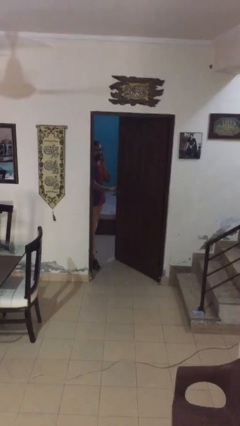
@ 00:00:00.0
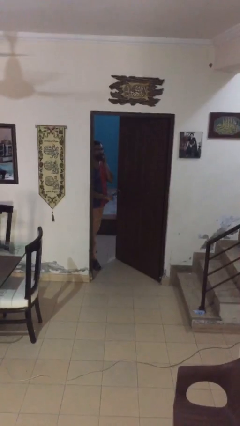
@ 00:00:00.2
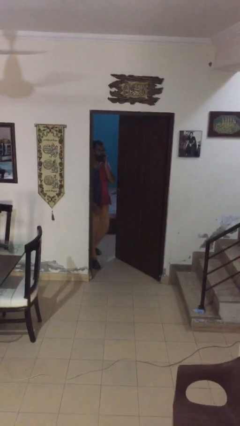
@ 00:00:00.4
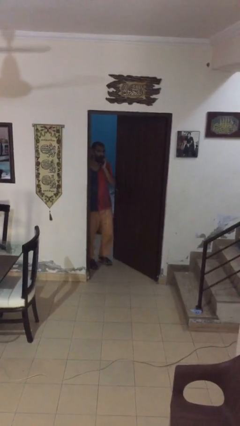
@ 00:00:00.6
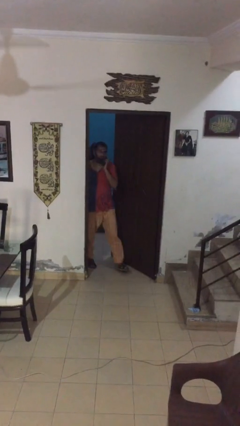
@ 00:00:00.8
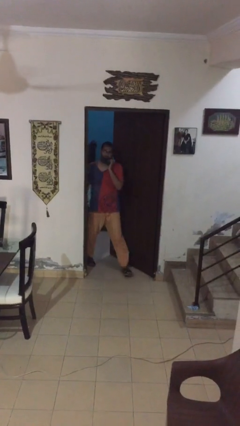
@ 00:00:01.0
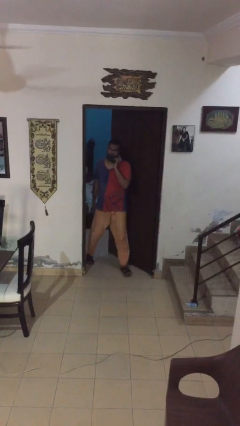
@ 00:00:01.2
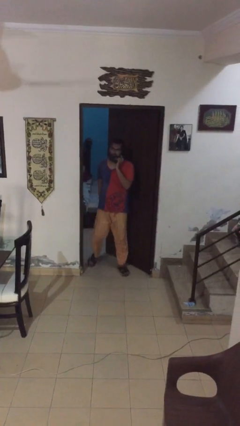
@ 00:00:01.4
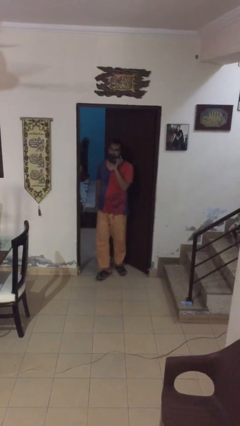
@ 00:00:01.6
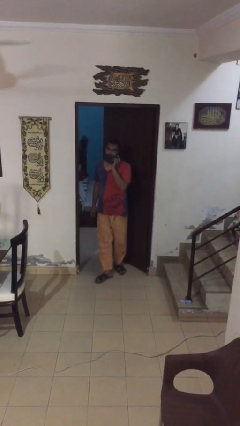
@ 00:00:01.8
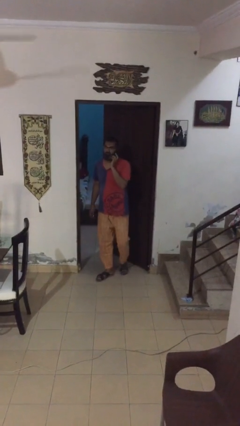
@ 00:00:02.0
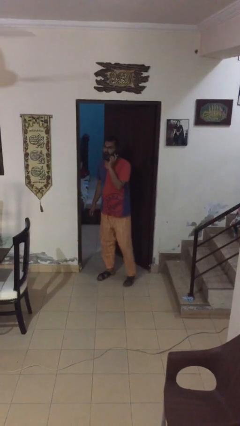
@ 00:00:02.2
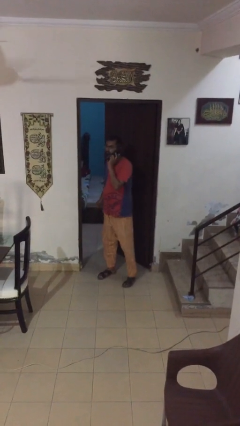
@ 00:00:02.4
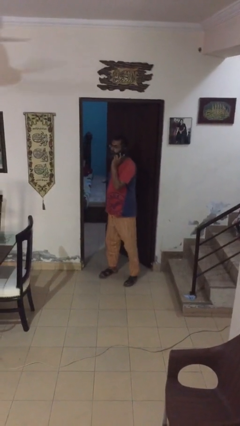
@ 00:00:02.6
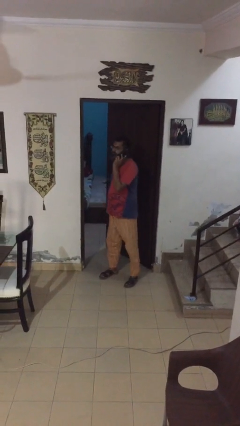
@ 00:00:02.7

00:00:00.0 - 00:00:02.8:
person enters scene through structure

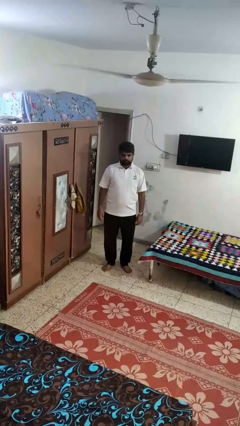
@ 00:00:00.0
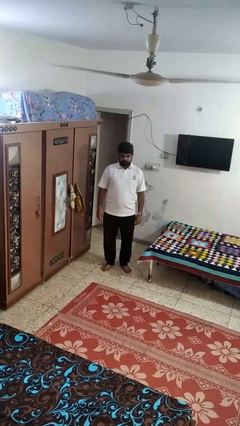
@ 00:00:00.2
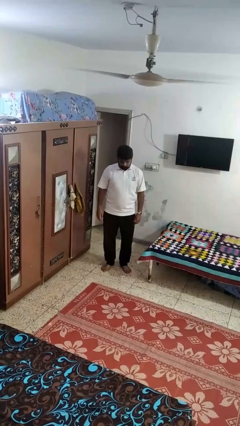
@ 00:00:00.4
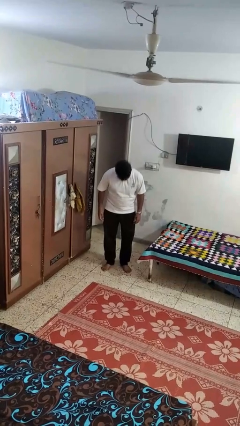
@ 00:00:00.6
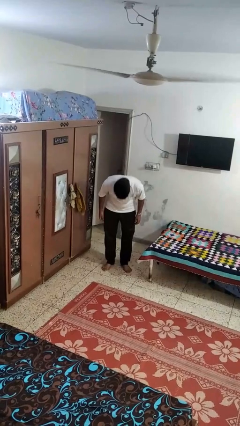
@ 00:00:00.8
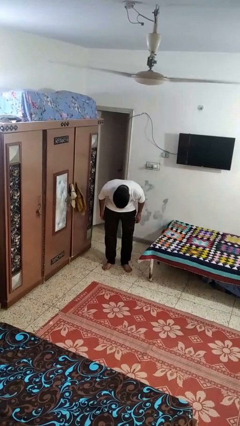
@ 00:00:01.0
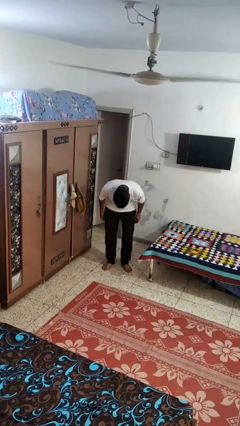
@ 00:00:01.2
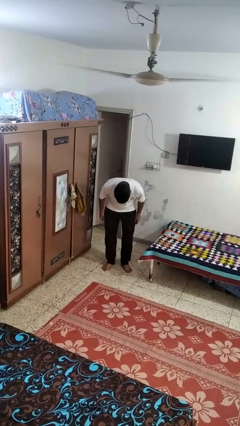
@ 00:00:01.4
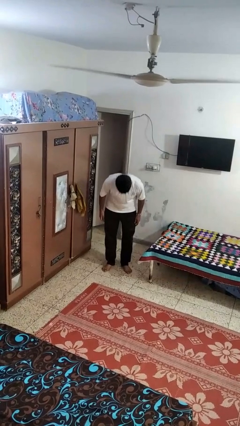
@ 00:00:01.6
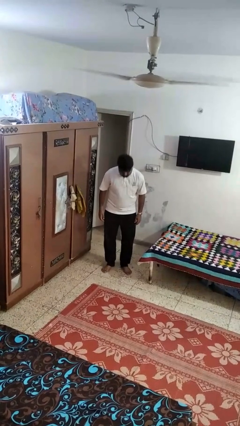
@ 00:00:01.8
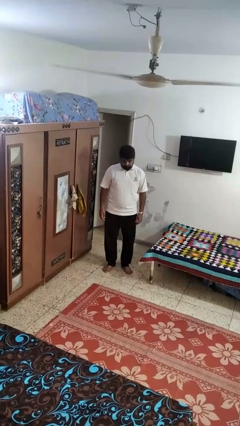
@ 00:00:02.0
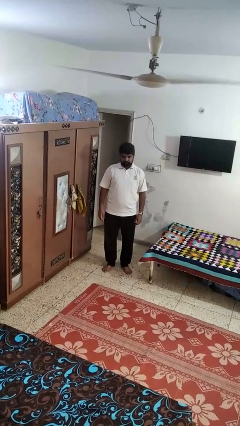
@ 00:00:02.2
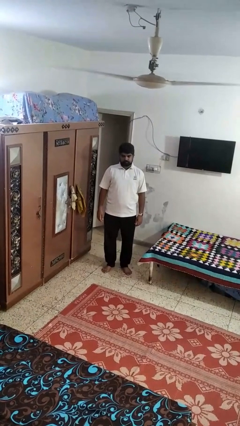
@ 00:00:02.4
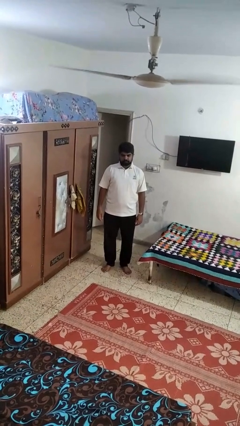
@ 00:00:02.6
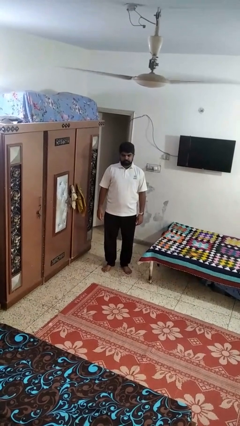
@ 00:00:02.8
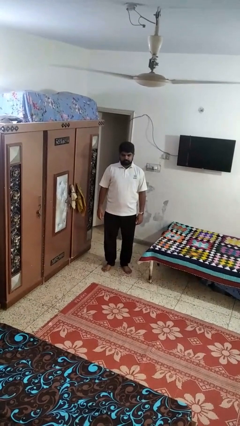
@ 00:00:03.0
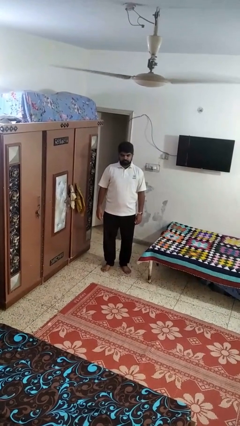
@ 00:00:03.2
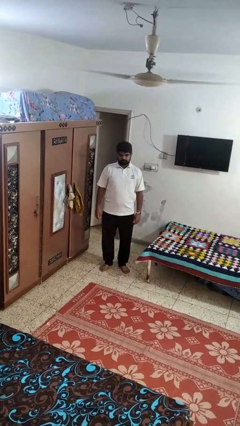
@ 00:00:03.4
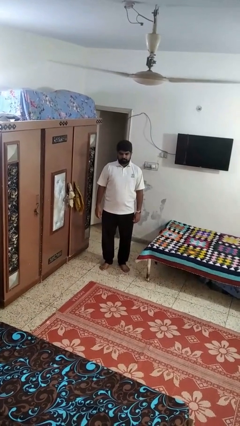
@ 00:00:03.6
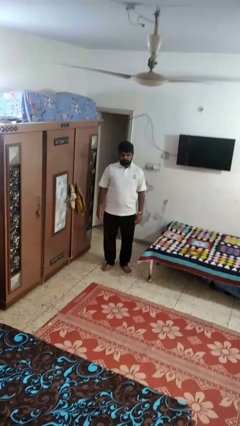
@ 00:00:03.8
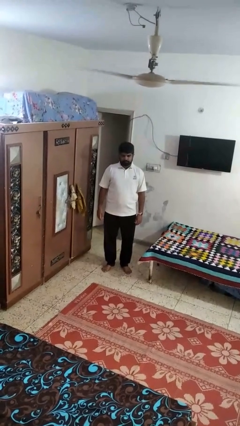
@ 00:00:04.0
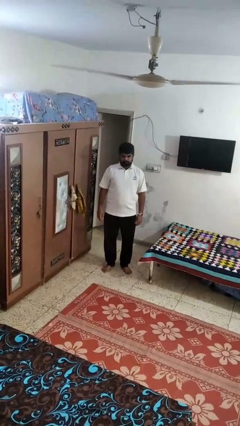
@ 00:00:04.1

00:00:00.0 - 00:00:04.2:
person bows

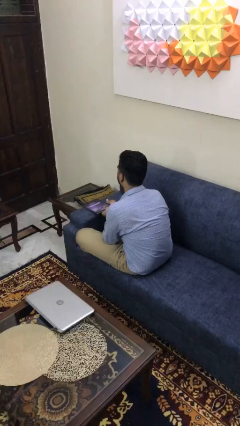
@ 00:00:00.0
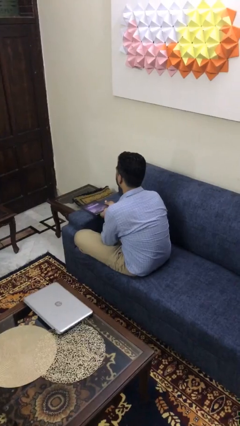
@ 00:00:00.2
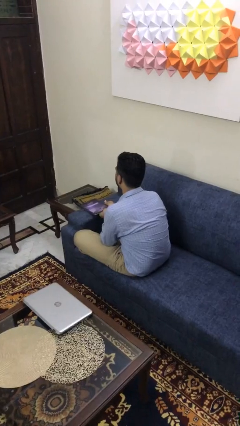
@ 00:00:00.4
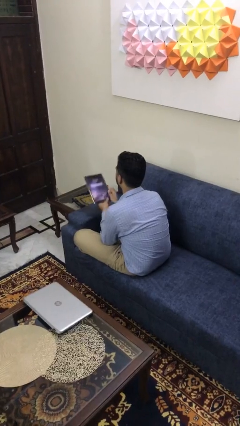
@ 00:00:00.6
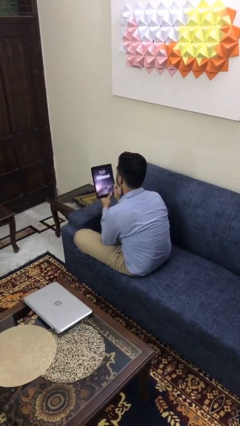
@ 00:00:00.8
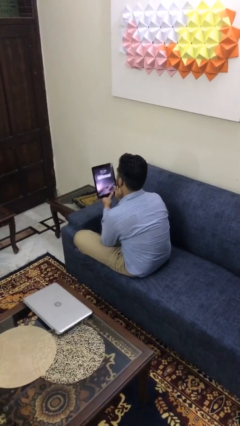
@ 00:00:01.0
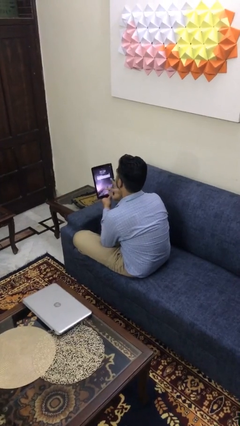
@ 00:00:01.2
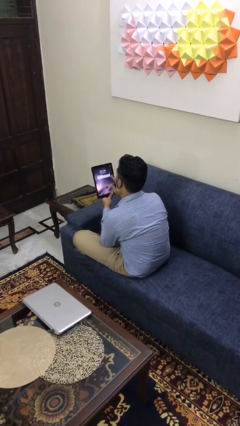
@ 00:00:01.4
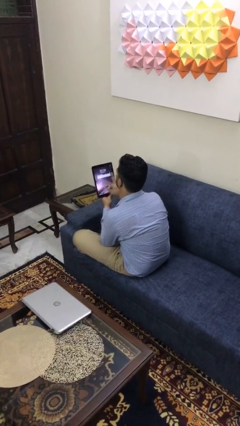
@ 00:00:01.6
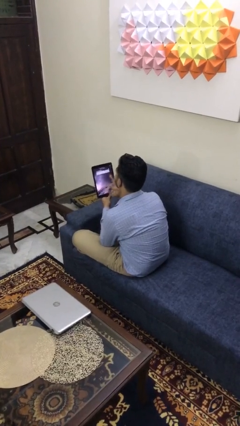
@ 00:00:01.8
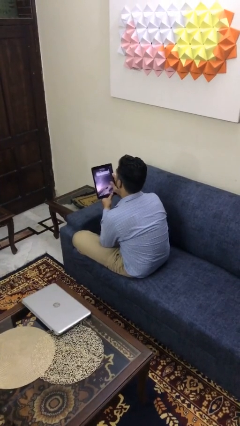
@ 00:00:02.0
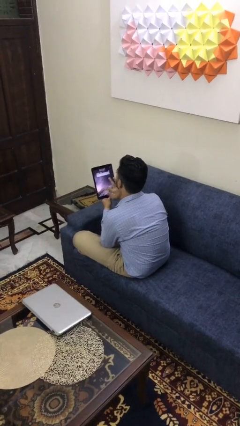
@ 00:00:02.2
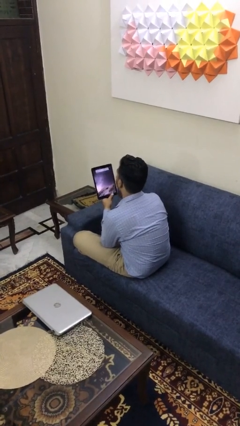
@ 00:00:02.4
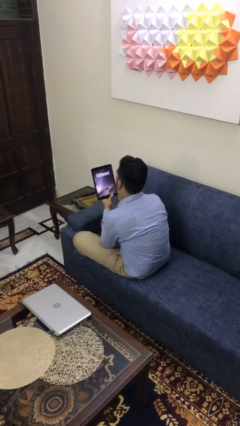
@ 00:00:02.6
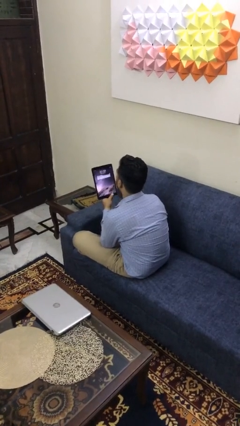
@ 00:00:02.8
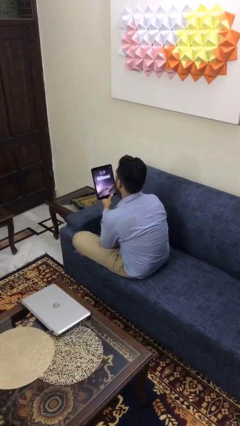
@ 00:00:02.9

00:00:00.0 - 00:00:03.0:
person interacts with tablet

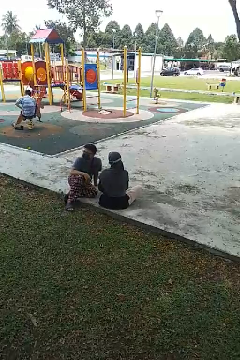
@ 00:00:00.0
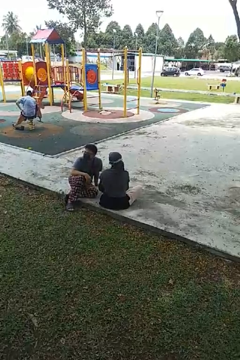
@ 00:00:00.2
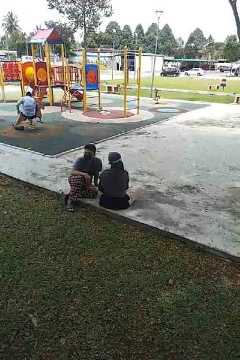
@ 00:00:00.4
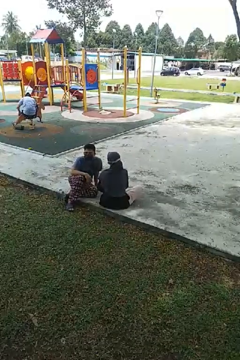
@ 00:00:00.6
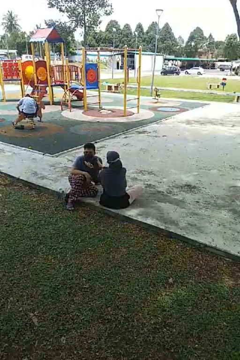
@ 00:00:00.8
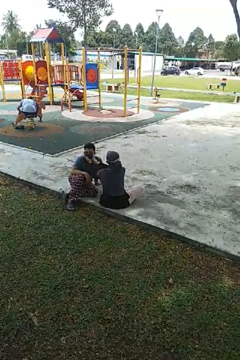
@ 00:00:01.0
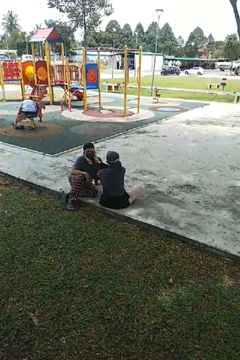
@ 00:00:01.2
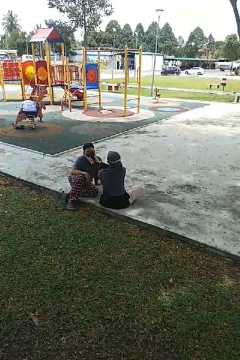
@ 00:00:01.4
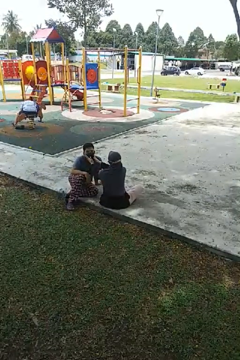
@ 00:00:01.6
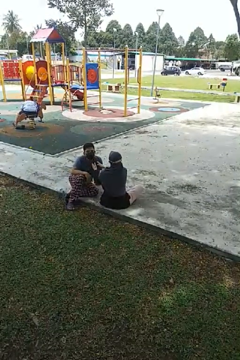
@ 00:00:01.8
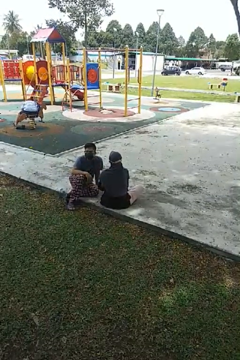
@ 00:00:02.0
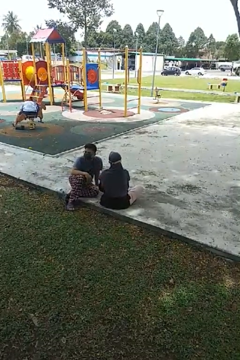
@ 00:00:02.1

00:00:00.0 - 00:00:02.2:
person touches face of person

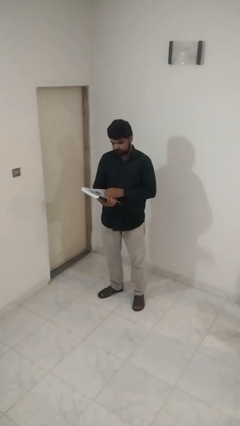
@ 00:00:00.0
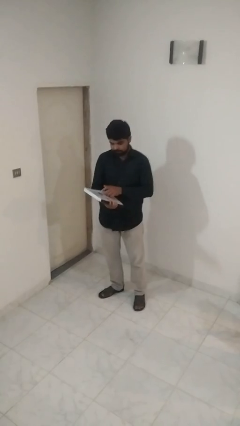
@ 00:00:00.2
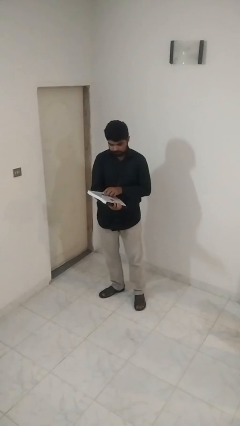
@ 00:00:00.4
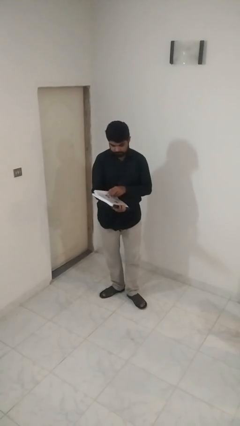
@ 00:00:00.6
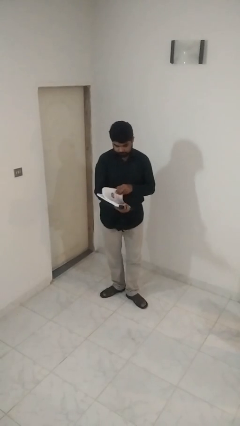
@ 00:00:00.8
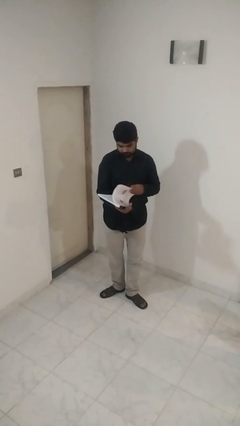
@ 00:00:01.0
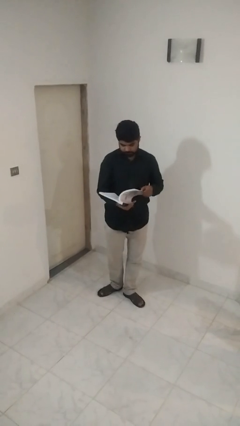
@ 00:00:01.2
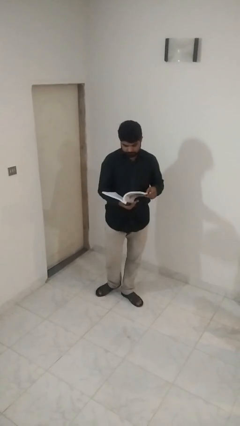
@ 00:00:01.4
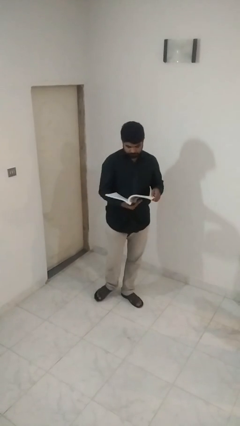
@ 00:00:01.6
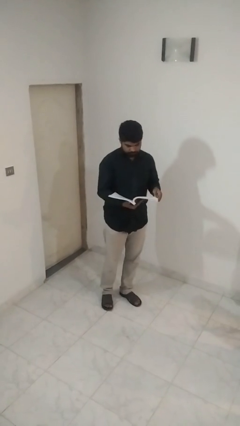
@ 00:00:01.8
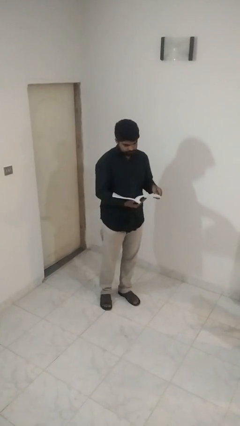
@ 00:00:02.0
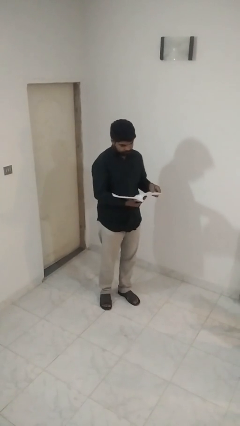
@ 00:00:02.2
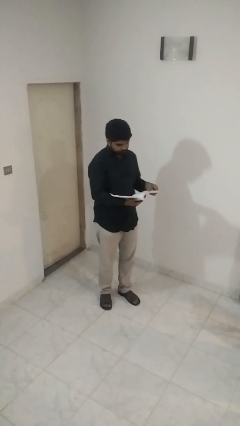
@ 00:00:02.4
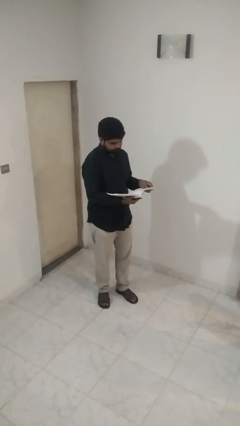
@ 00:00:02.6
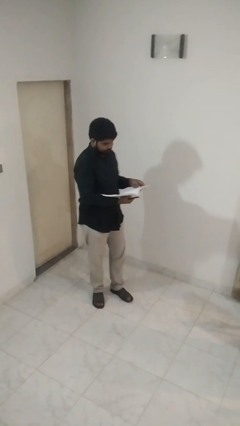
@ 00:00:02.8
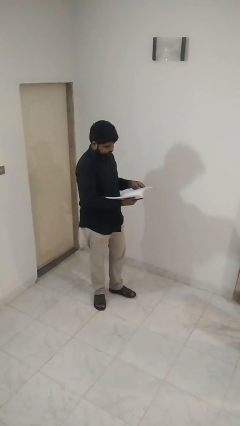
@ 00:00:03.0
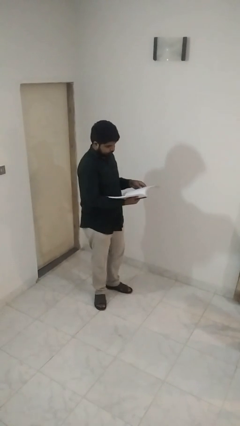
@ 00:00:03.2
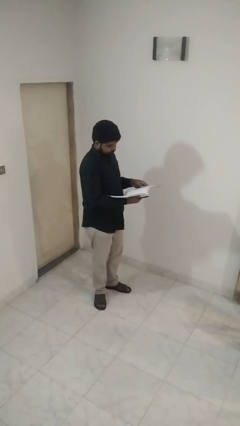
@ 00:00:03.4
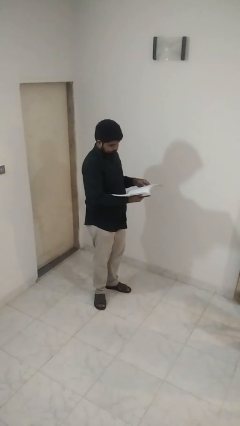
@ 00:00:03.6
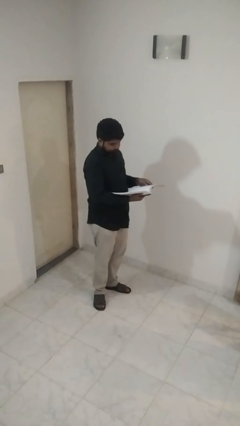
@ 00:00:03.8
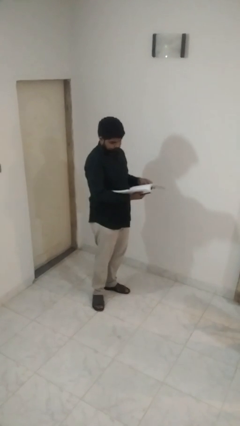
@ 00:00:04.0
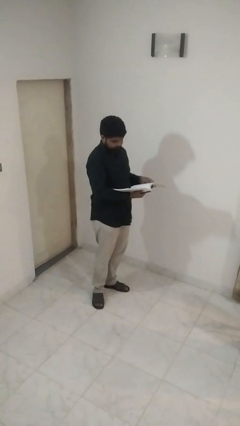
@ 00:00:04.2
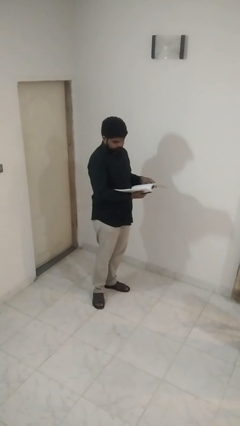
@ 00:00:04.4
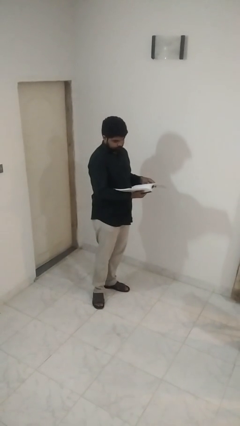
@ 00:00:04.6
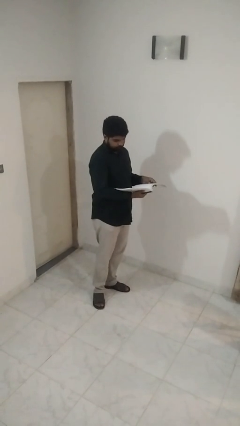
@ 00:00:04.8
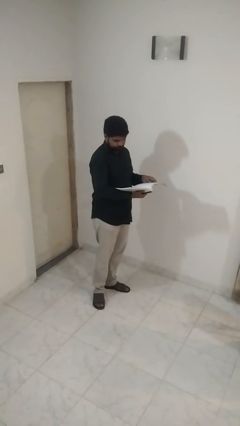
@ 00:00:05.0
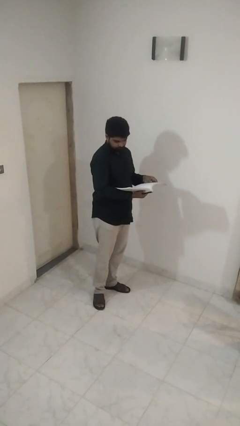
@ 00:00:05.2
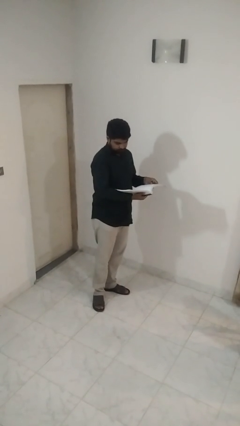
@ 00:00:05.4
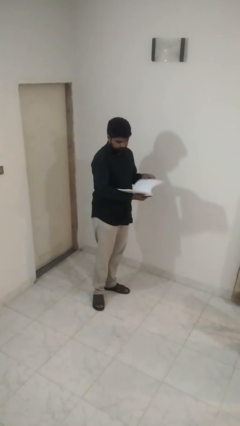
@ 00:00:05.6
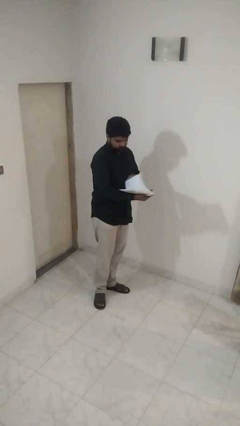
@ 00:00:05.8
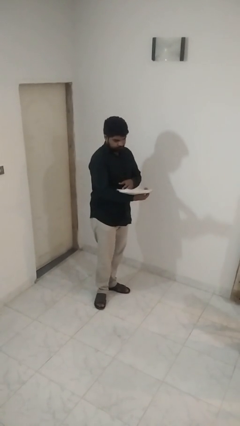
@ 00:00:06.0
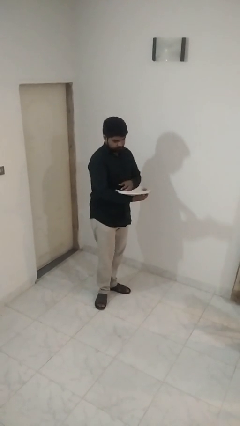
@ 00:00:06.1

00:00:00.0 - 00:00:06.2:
person reads book
